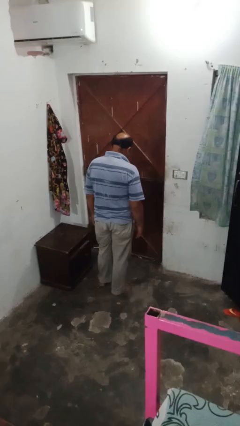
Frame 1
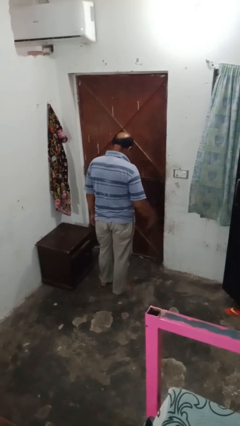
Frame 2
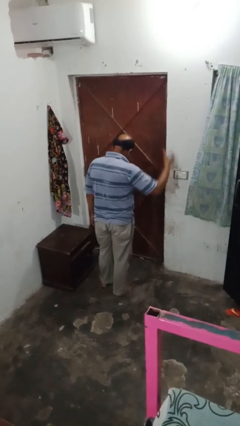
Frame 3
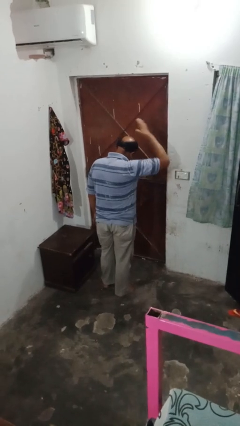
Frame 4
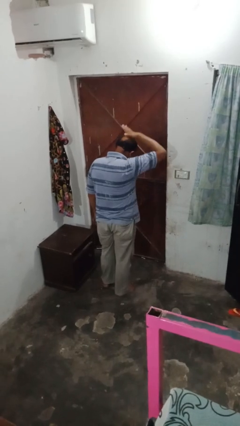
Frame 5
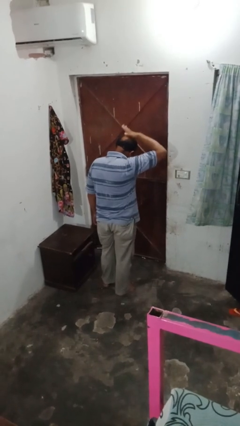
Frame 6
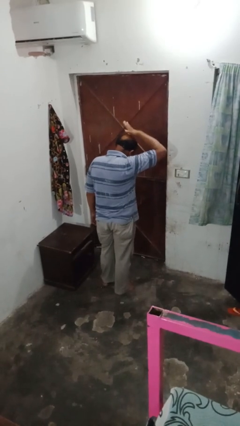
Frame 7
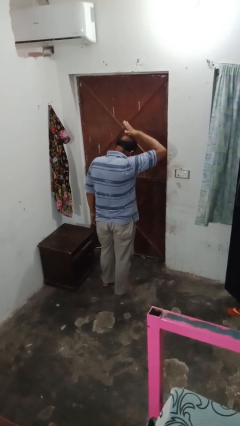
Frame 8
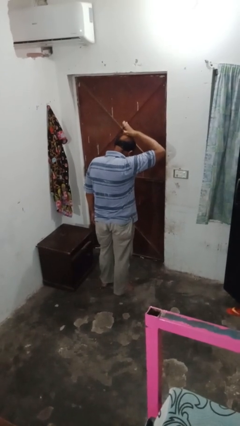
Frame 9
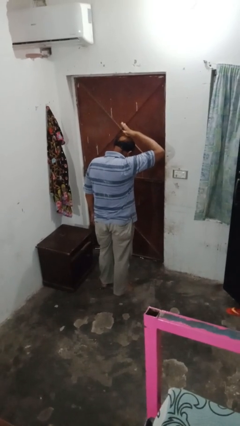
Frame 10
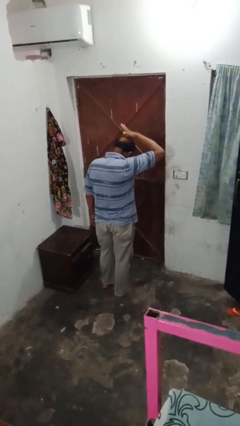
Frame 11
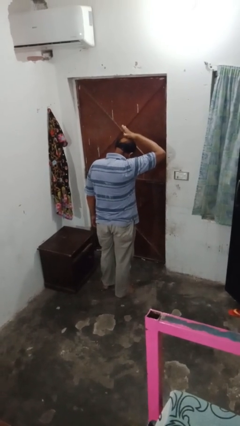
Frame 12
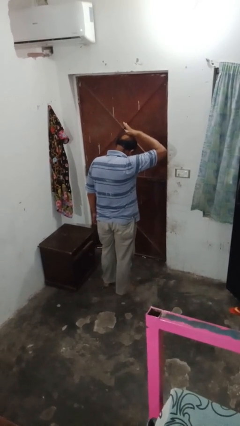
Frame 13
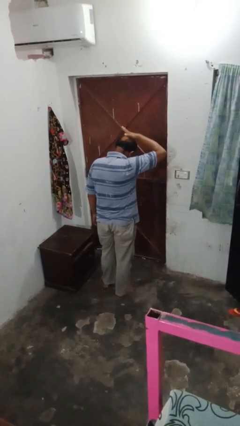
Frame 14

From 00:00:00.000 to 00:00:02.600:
person pats head

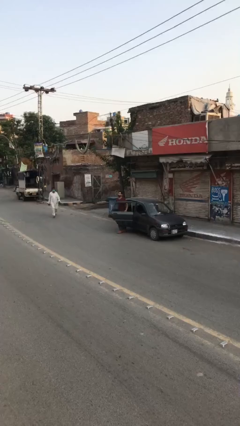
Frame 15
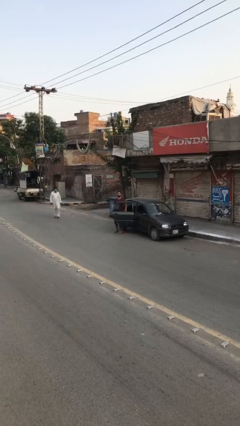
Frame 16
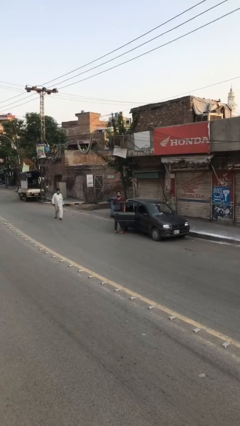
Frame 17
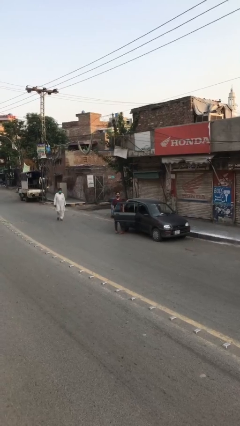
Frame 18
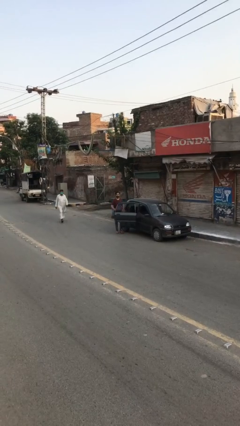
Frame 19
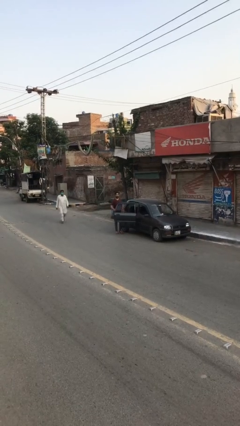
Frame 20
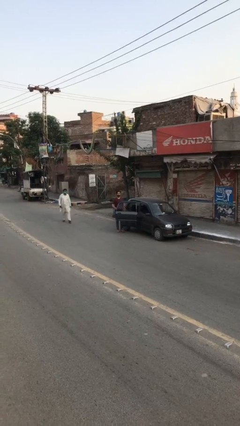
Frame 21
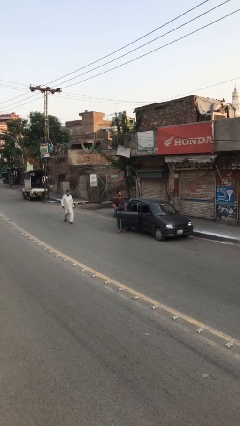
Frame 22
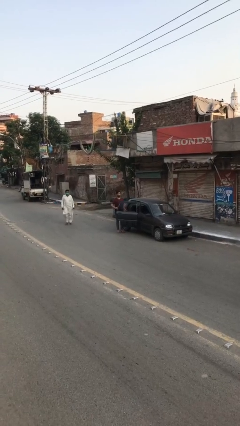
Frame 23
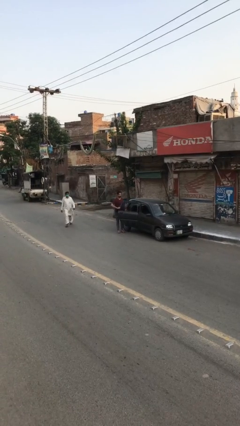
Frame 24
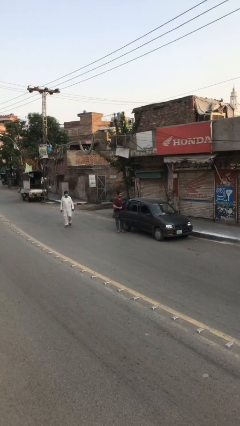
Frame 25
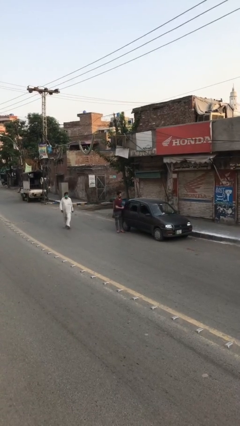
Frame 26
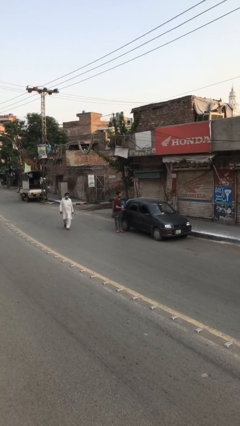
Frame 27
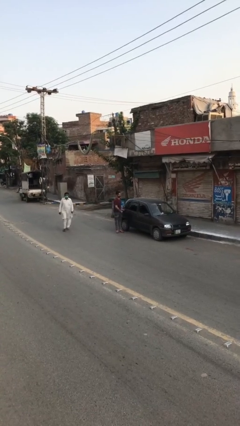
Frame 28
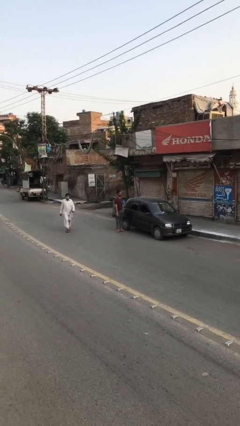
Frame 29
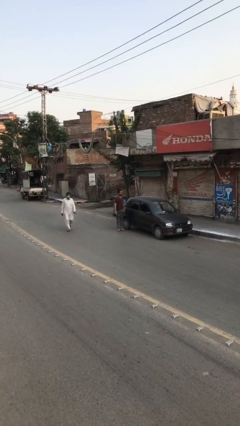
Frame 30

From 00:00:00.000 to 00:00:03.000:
person closes car door

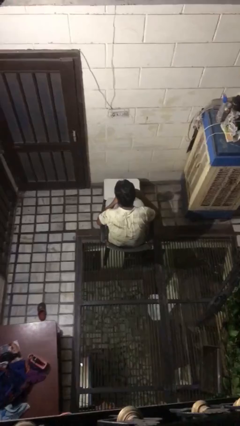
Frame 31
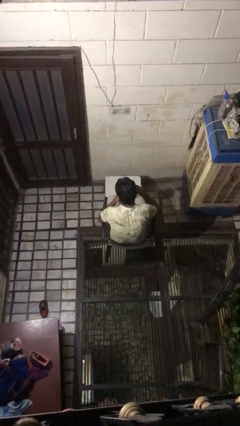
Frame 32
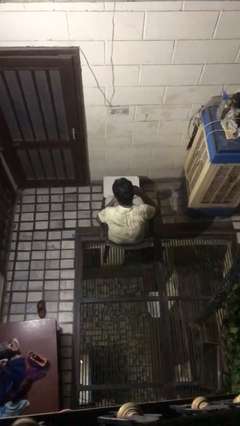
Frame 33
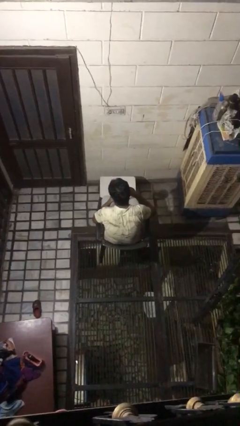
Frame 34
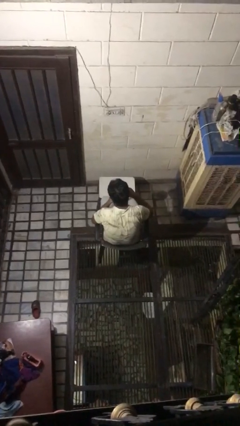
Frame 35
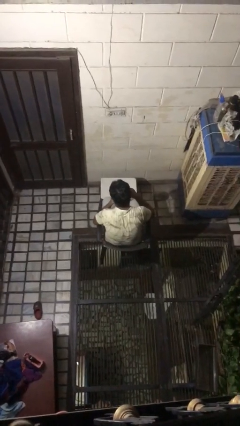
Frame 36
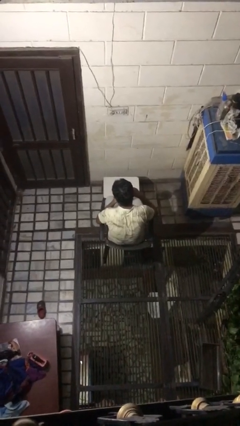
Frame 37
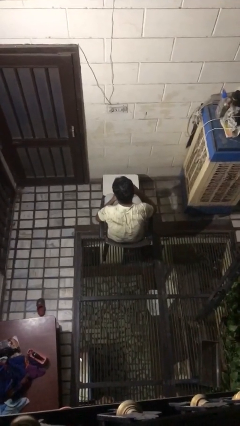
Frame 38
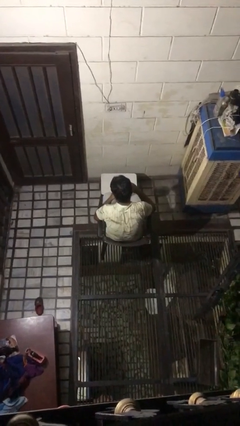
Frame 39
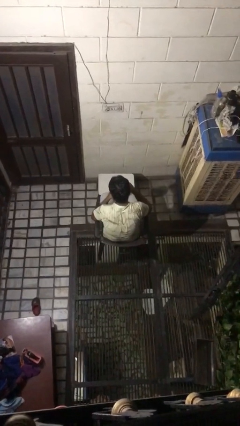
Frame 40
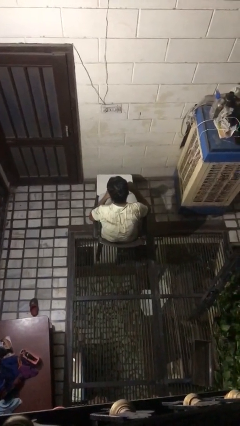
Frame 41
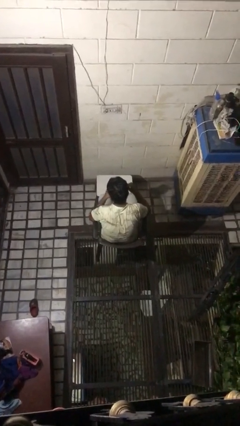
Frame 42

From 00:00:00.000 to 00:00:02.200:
person stirs mug

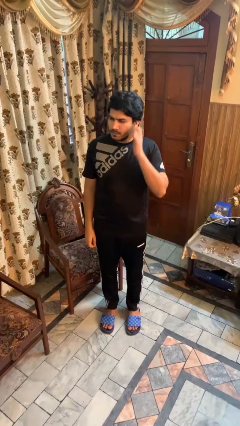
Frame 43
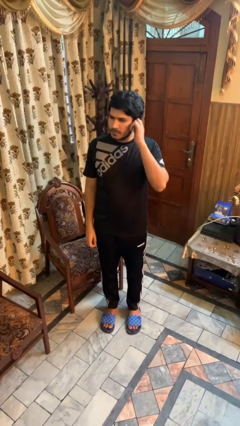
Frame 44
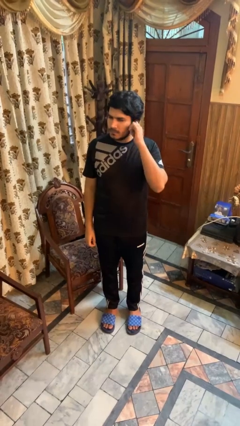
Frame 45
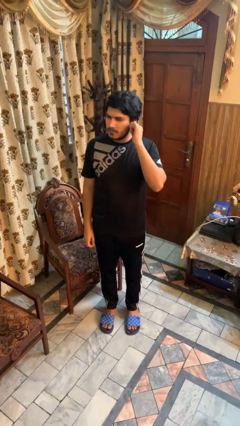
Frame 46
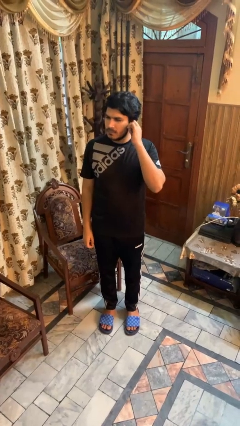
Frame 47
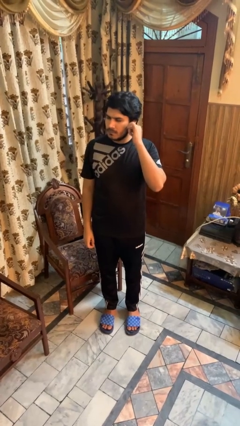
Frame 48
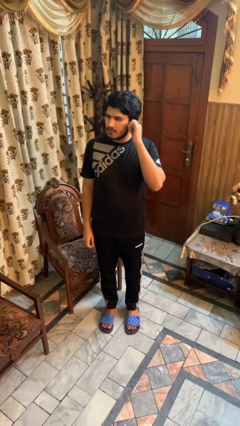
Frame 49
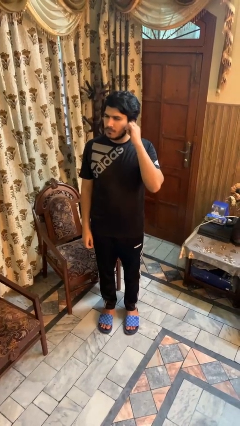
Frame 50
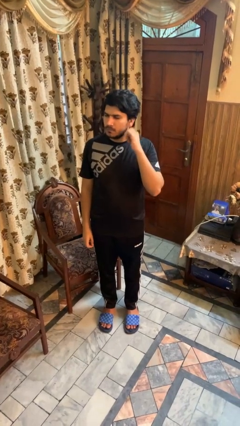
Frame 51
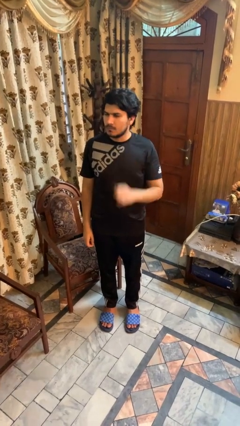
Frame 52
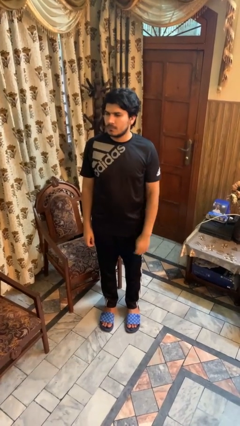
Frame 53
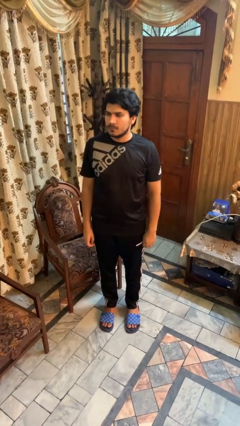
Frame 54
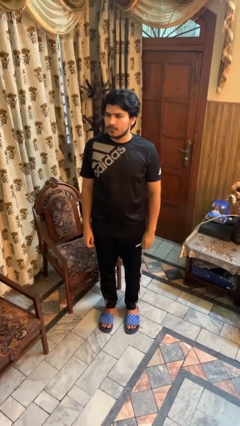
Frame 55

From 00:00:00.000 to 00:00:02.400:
person touches earlobe

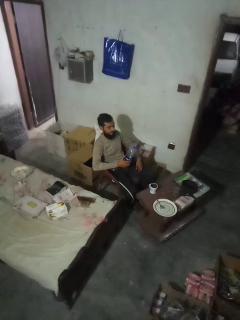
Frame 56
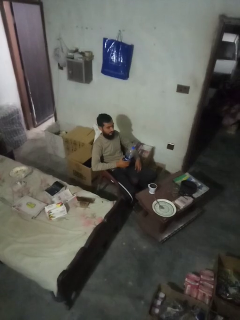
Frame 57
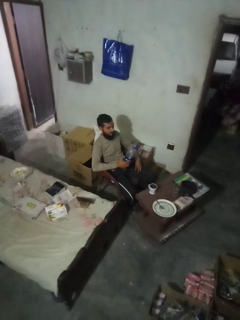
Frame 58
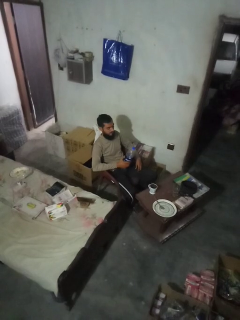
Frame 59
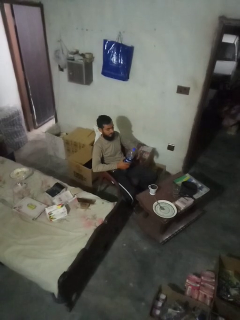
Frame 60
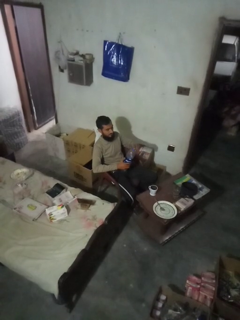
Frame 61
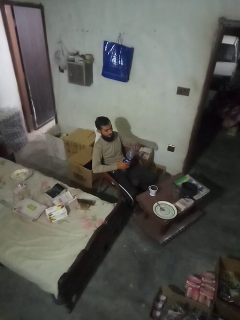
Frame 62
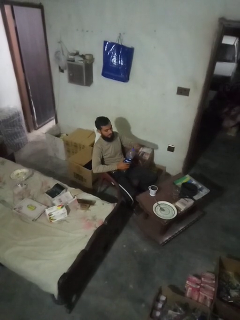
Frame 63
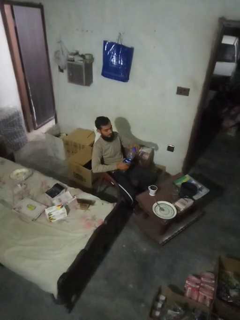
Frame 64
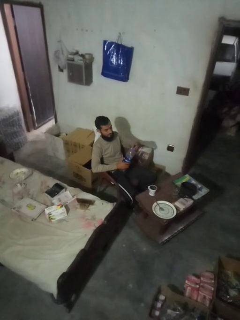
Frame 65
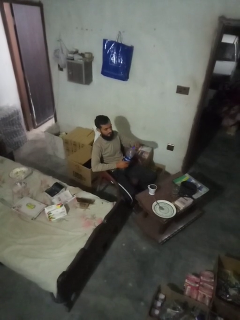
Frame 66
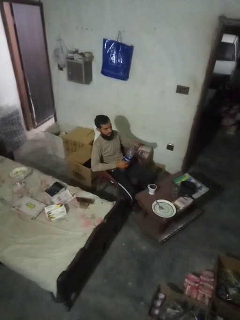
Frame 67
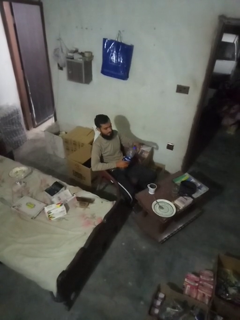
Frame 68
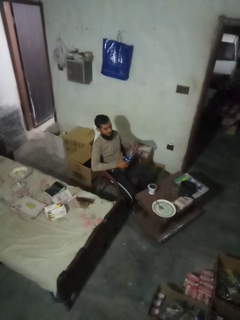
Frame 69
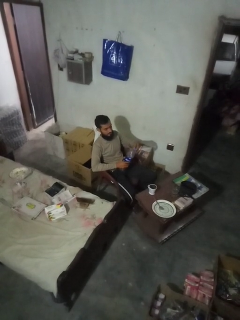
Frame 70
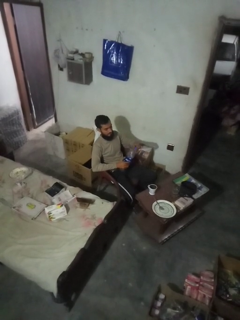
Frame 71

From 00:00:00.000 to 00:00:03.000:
person unscrews lid from bottle

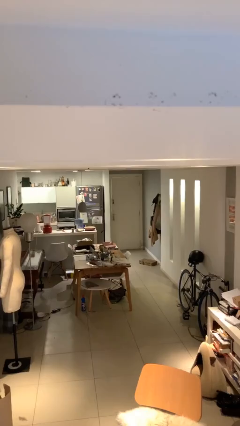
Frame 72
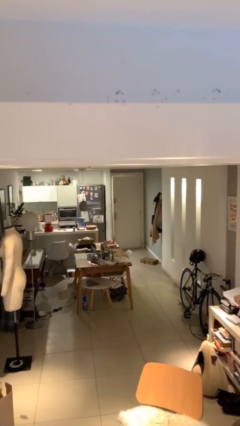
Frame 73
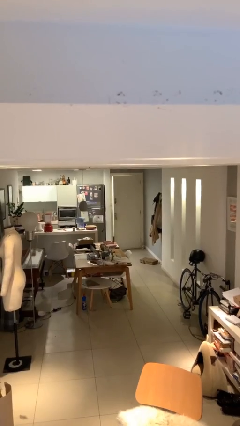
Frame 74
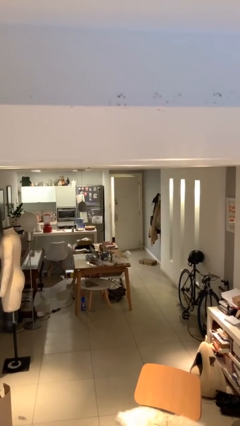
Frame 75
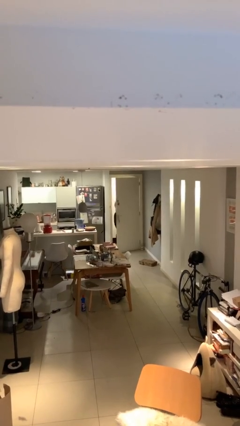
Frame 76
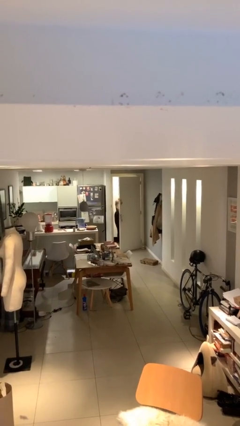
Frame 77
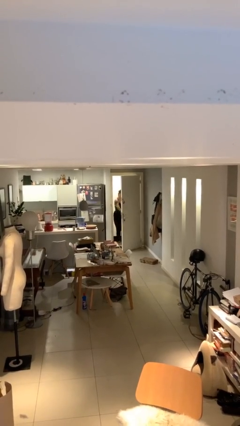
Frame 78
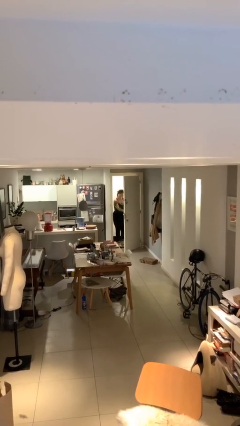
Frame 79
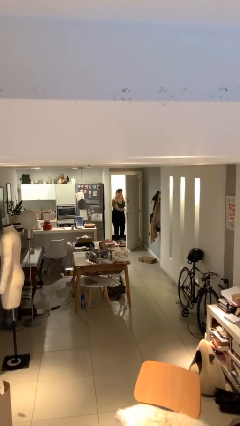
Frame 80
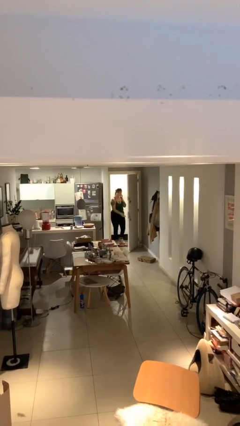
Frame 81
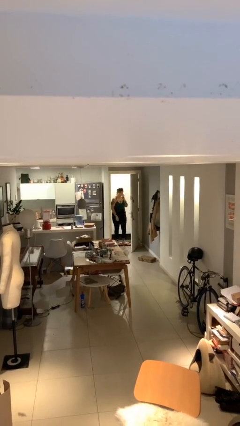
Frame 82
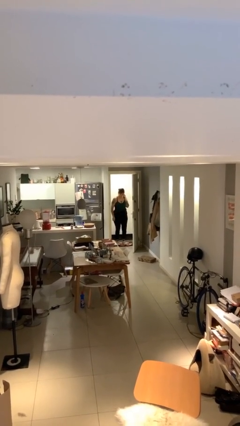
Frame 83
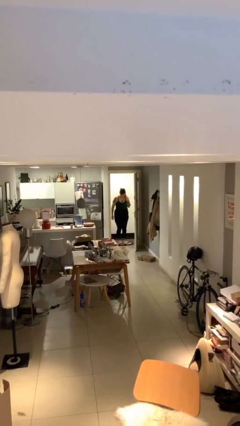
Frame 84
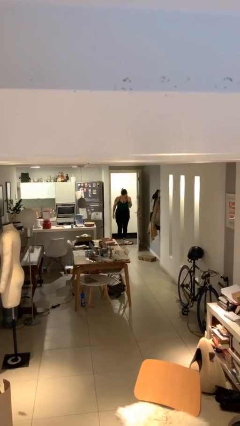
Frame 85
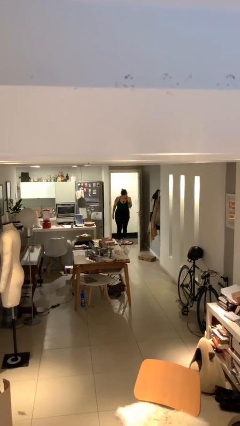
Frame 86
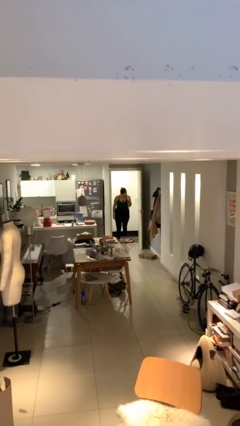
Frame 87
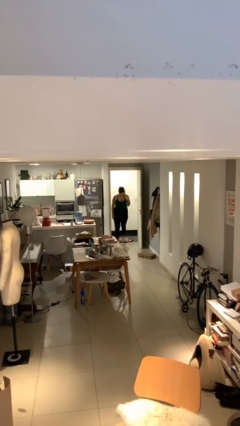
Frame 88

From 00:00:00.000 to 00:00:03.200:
person opens facility door

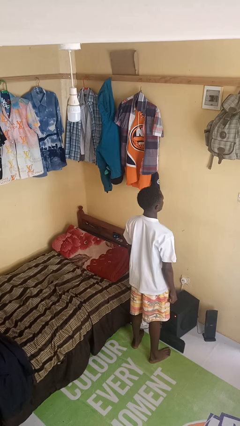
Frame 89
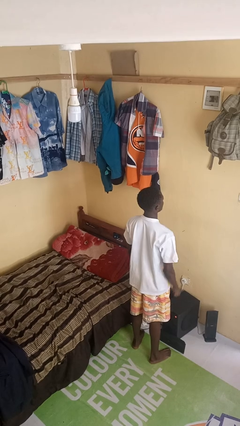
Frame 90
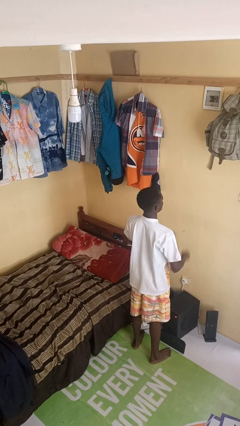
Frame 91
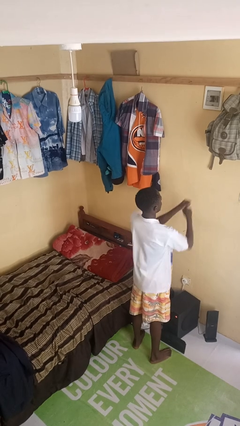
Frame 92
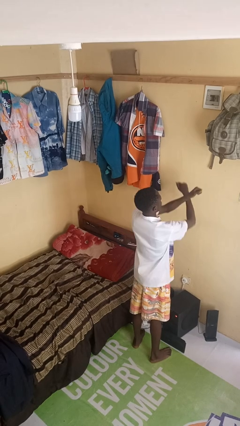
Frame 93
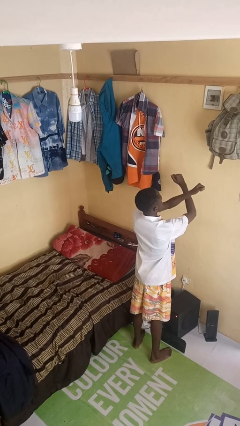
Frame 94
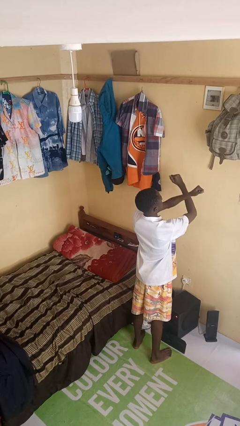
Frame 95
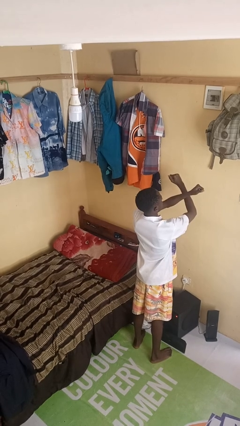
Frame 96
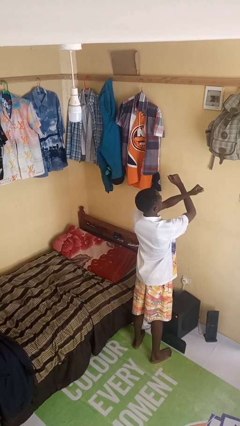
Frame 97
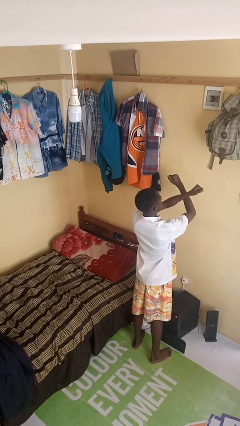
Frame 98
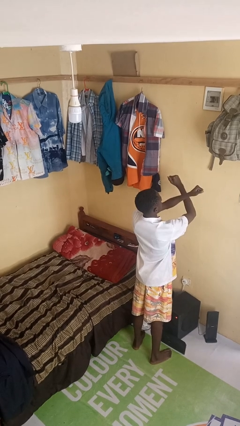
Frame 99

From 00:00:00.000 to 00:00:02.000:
person gestures arms x
